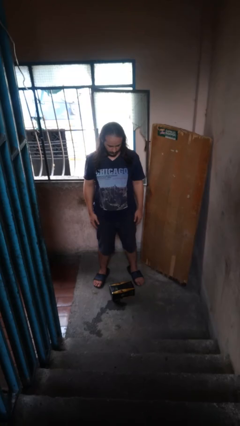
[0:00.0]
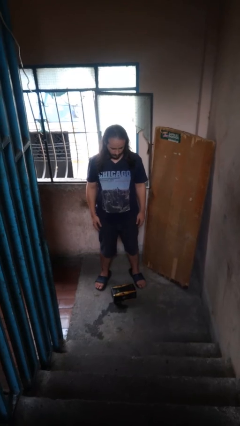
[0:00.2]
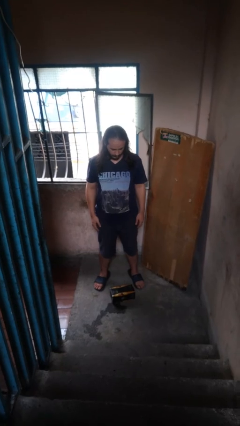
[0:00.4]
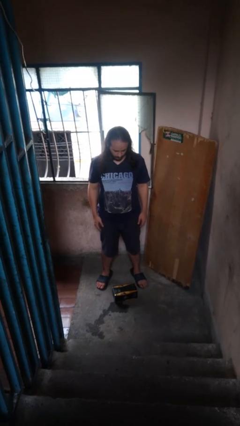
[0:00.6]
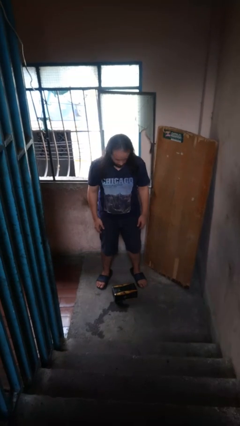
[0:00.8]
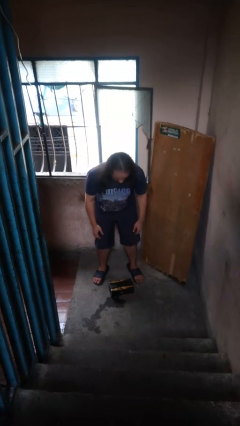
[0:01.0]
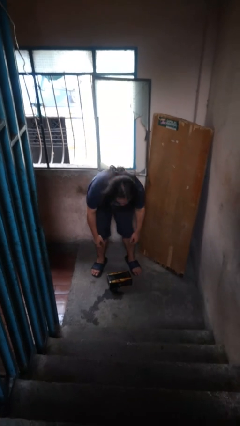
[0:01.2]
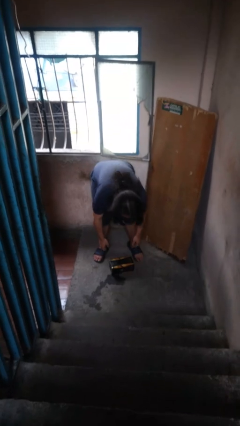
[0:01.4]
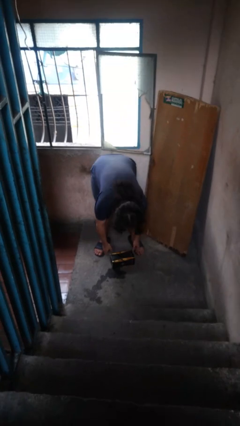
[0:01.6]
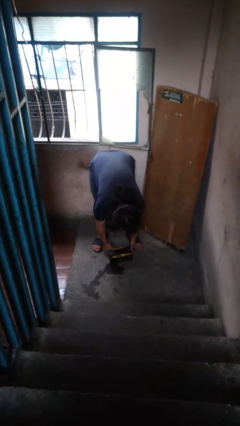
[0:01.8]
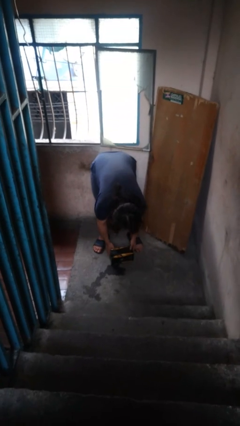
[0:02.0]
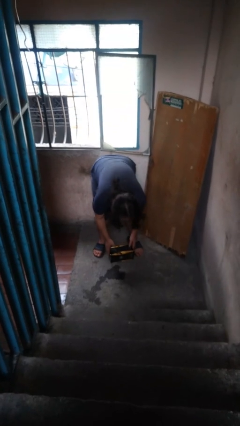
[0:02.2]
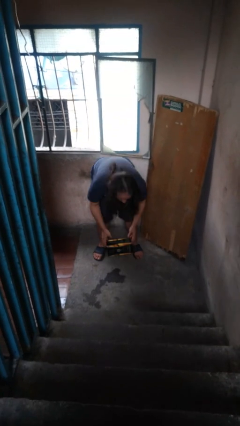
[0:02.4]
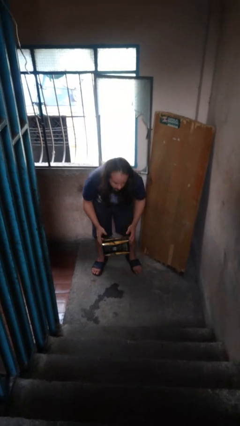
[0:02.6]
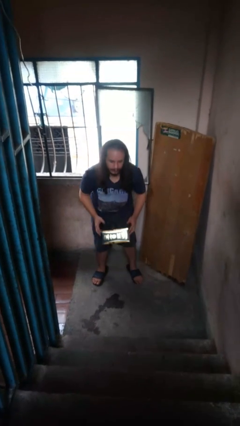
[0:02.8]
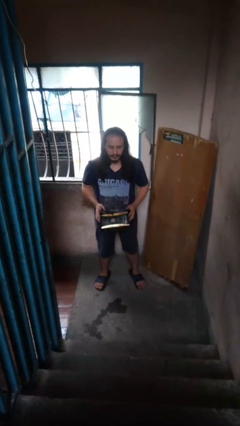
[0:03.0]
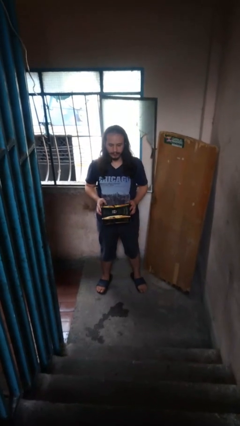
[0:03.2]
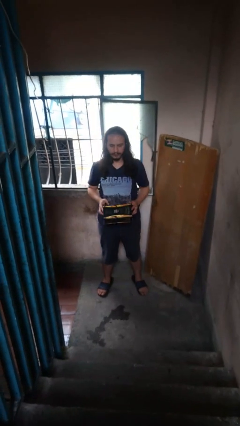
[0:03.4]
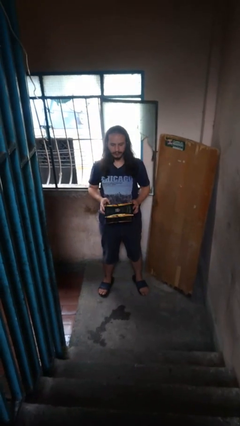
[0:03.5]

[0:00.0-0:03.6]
person picks up object from floor

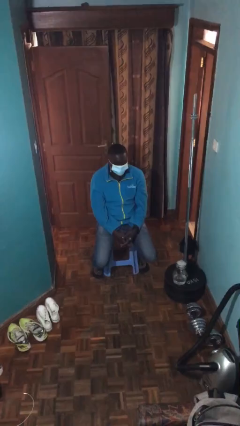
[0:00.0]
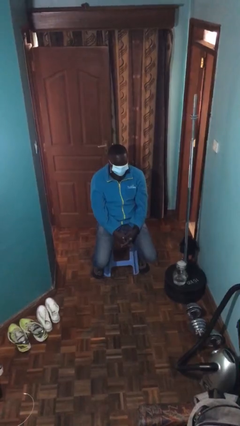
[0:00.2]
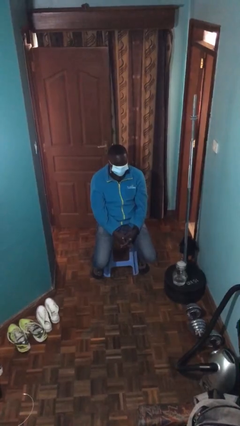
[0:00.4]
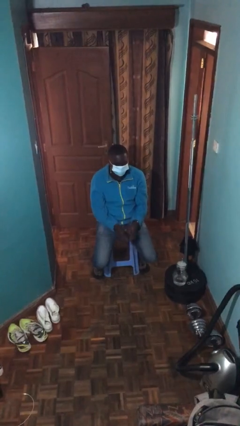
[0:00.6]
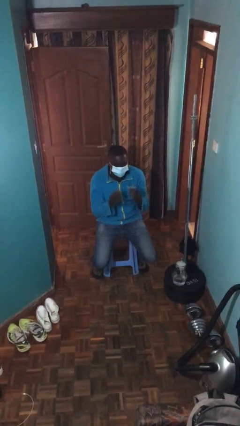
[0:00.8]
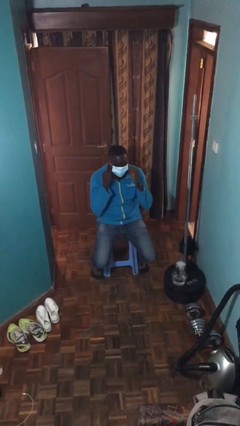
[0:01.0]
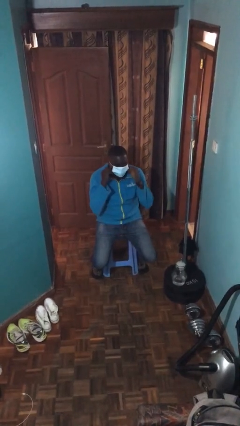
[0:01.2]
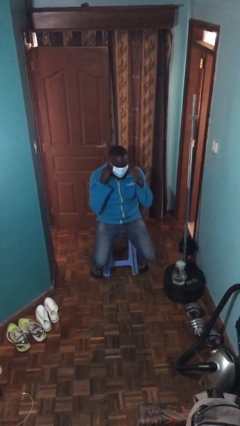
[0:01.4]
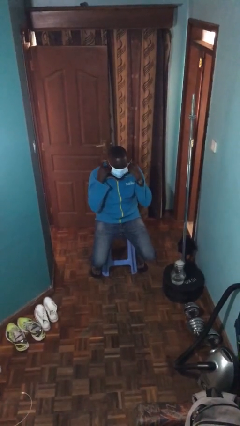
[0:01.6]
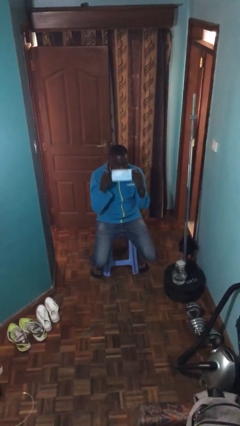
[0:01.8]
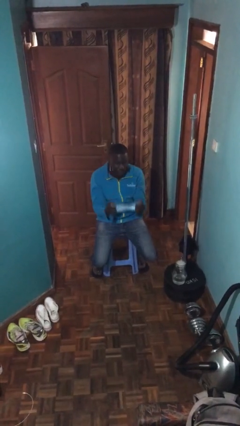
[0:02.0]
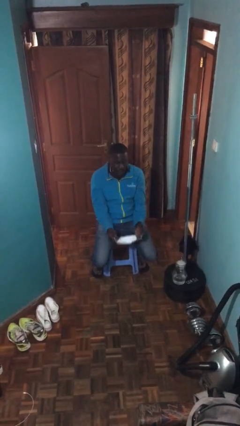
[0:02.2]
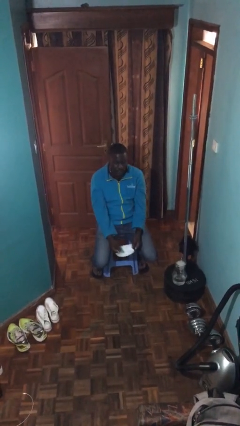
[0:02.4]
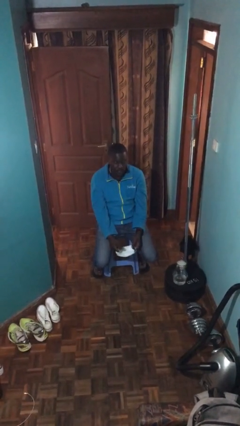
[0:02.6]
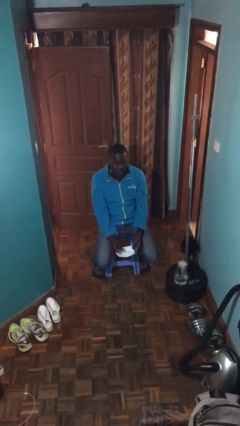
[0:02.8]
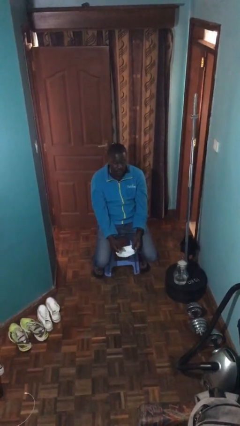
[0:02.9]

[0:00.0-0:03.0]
person takes off facemask

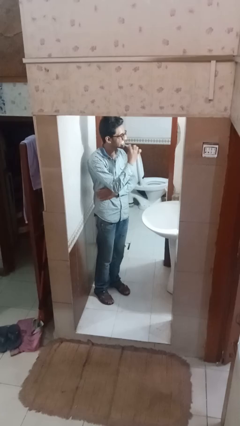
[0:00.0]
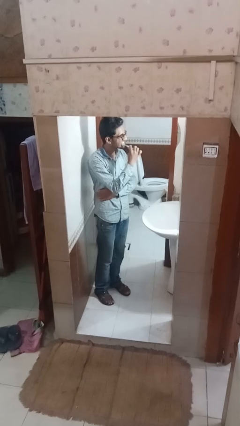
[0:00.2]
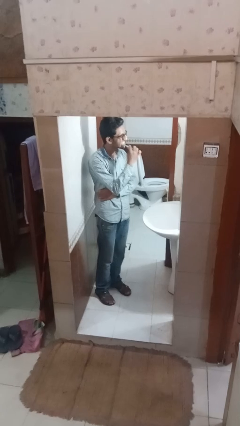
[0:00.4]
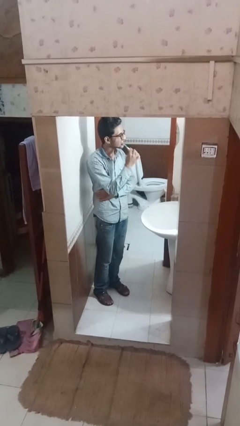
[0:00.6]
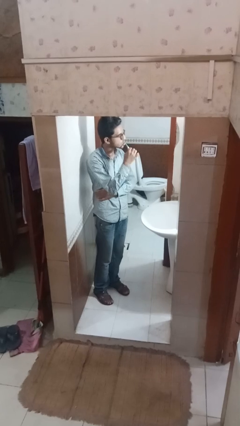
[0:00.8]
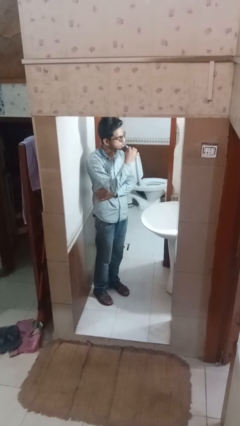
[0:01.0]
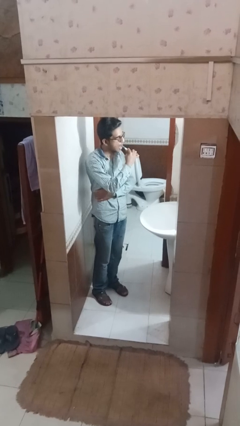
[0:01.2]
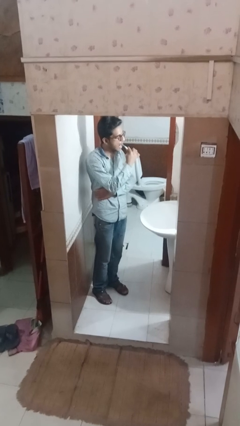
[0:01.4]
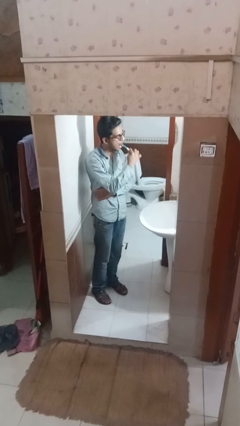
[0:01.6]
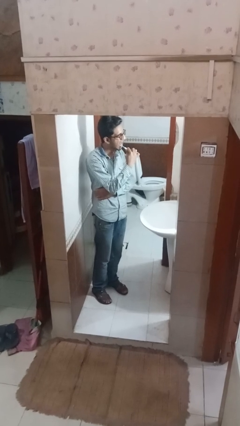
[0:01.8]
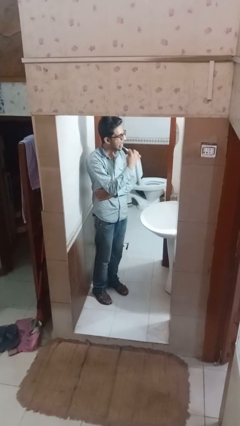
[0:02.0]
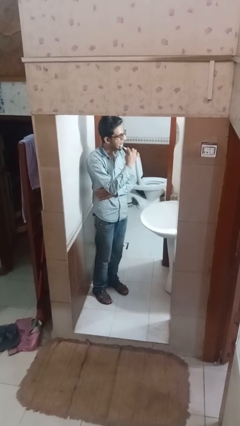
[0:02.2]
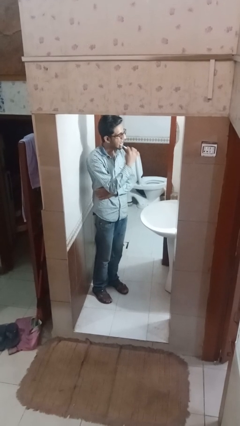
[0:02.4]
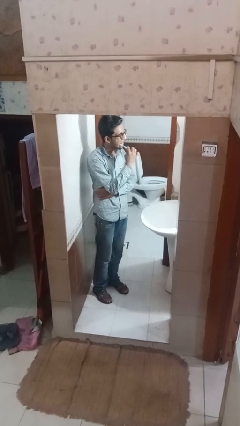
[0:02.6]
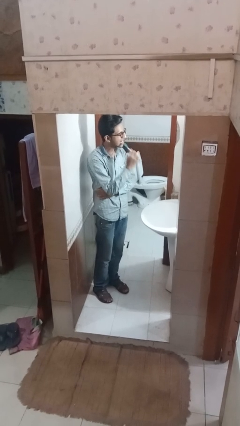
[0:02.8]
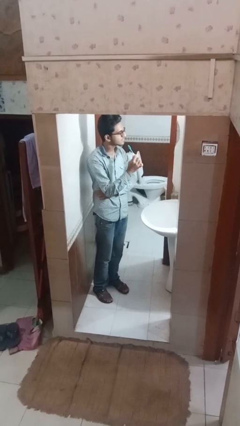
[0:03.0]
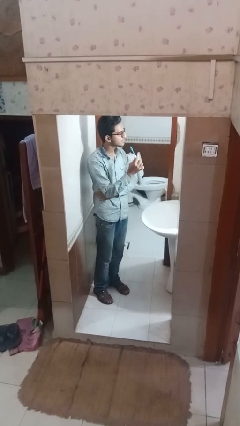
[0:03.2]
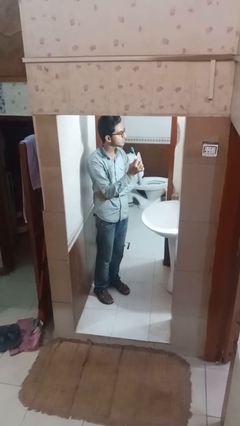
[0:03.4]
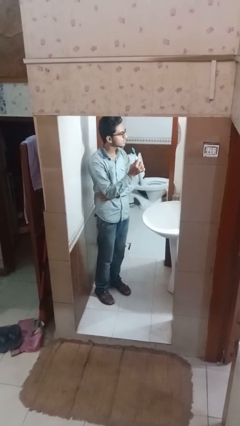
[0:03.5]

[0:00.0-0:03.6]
person brushes teeth

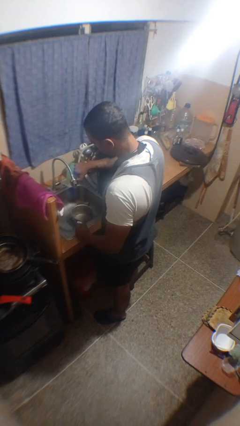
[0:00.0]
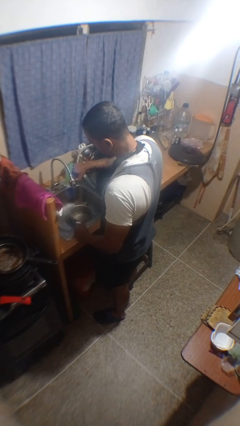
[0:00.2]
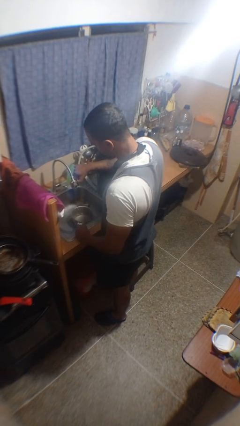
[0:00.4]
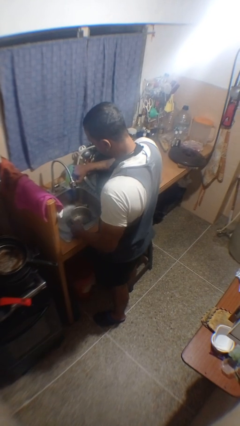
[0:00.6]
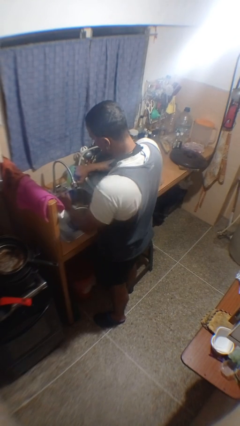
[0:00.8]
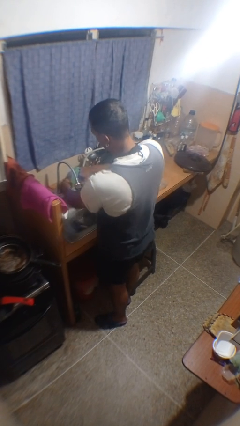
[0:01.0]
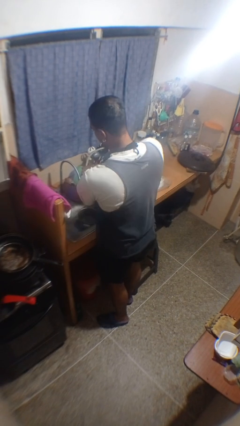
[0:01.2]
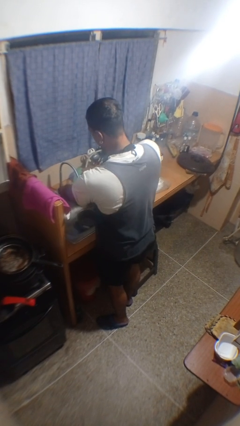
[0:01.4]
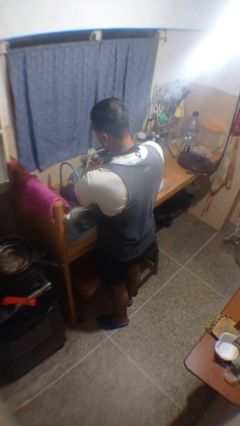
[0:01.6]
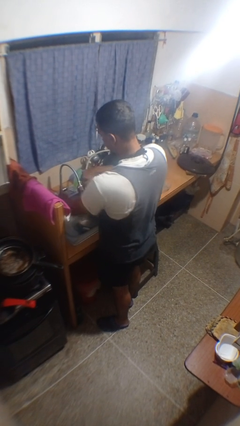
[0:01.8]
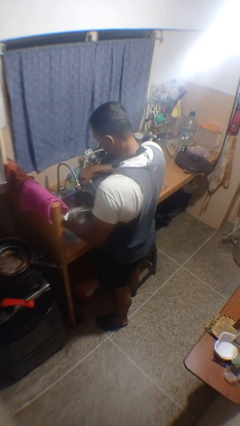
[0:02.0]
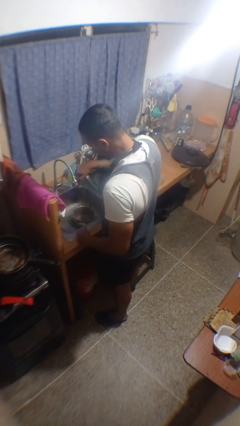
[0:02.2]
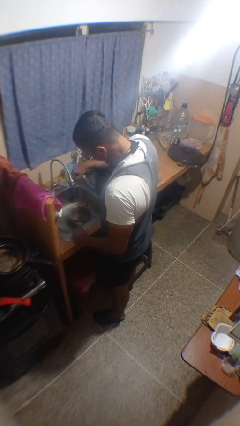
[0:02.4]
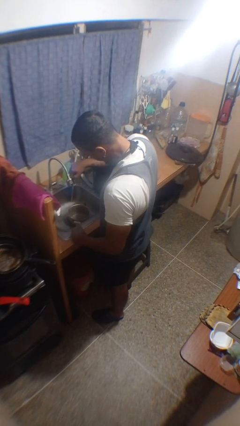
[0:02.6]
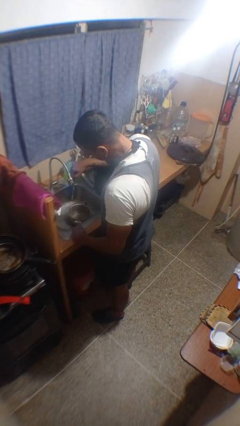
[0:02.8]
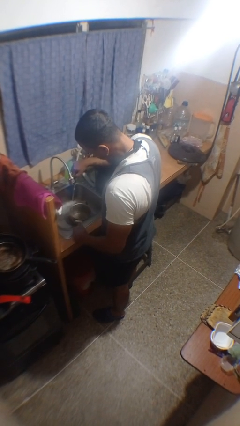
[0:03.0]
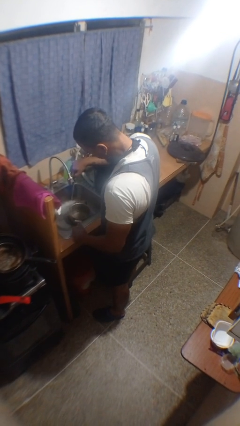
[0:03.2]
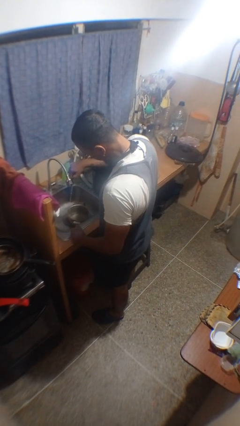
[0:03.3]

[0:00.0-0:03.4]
person turns on faucet

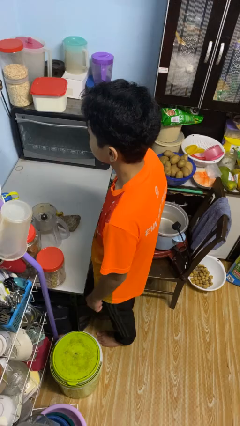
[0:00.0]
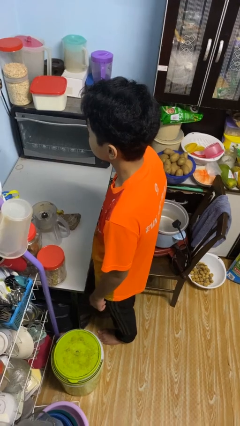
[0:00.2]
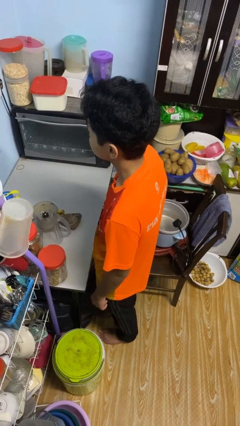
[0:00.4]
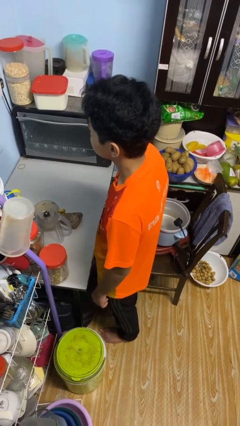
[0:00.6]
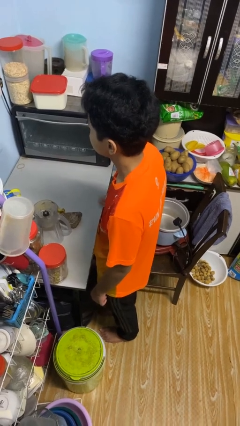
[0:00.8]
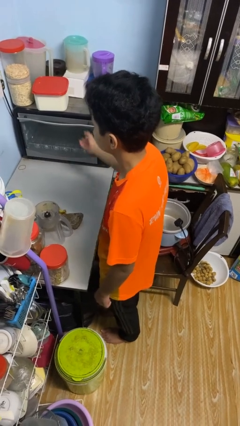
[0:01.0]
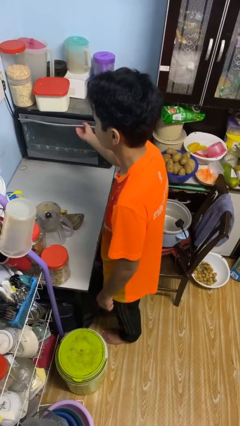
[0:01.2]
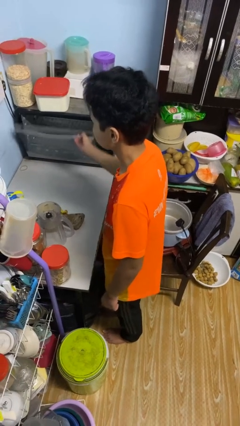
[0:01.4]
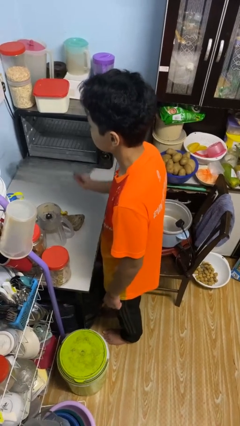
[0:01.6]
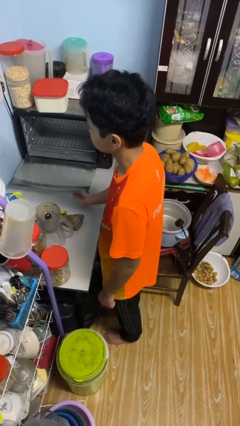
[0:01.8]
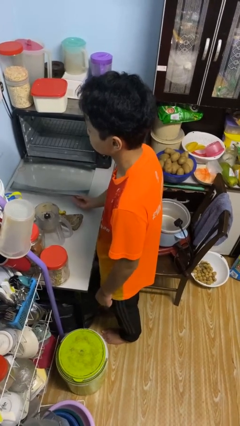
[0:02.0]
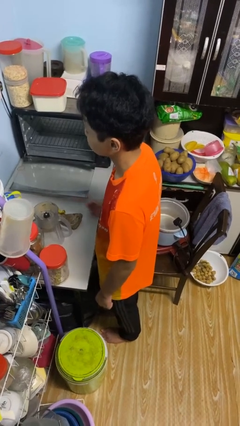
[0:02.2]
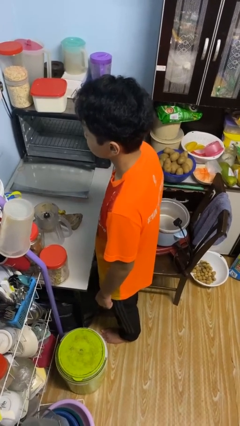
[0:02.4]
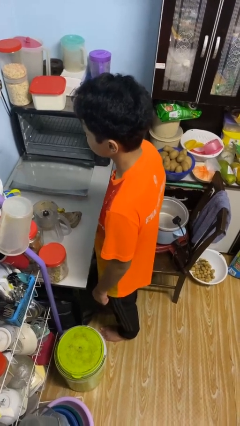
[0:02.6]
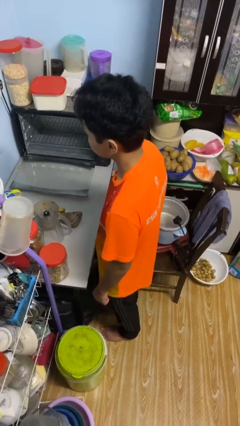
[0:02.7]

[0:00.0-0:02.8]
person opens oven door

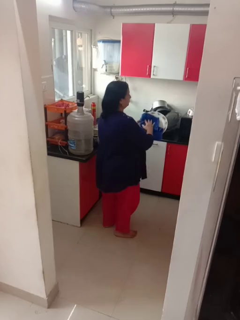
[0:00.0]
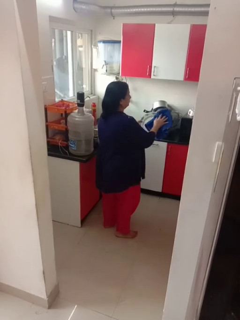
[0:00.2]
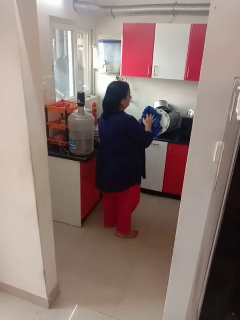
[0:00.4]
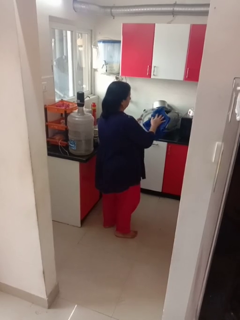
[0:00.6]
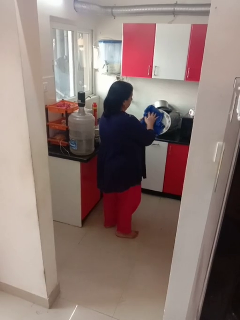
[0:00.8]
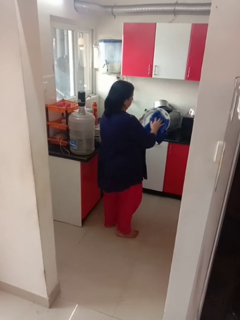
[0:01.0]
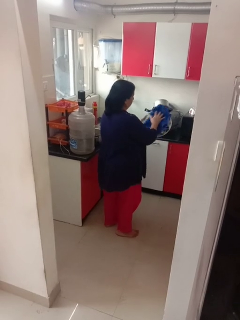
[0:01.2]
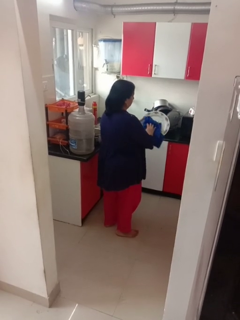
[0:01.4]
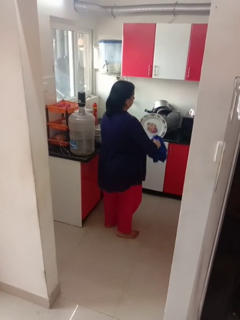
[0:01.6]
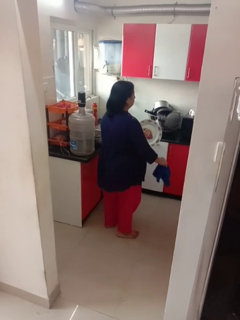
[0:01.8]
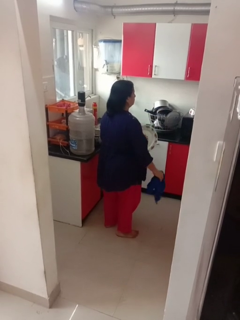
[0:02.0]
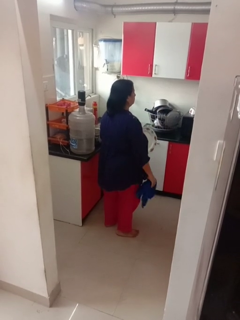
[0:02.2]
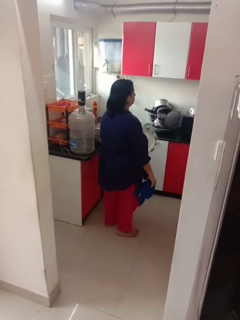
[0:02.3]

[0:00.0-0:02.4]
person dries dish
